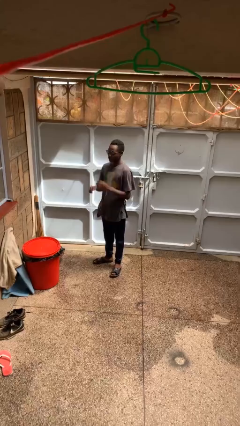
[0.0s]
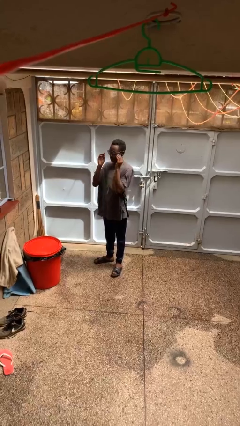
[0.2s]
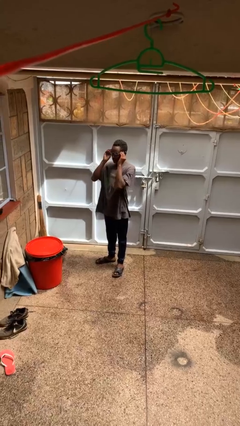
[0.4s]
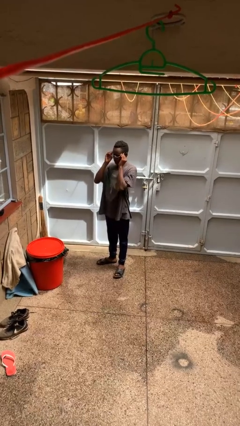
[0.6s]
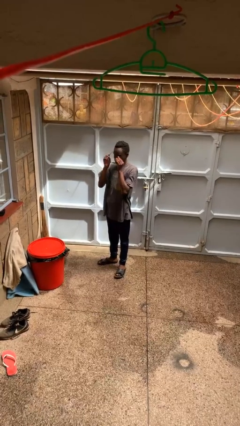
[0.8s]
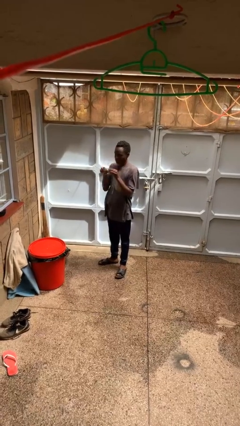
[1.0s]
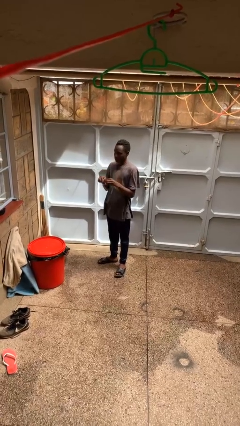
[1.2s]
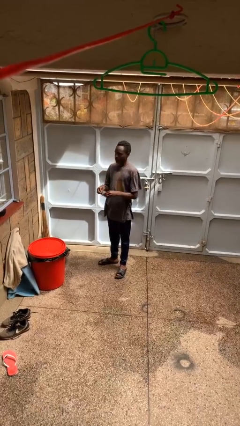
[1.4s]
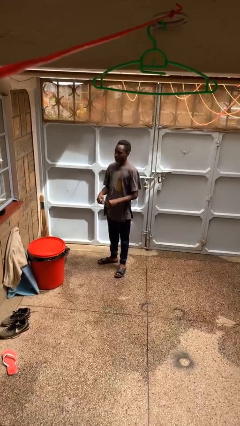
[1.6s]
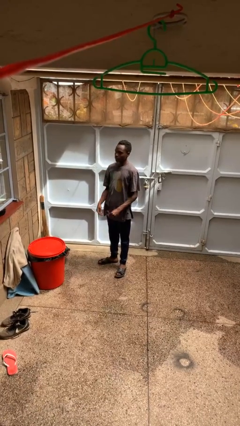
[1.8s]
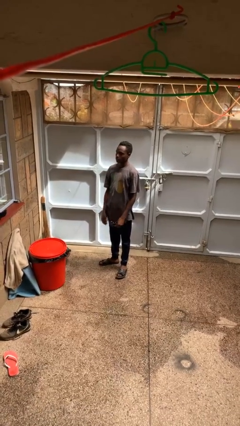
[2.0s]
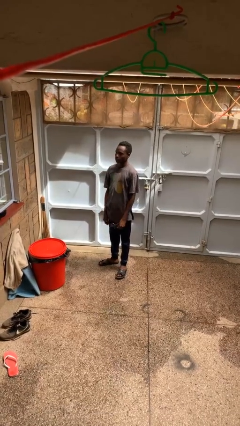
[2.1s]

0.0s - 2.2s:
person takes off glasses

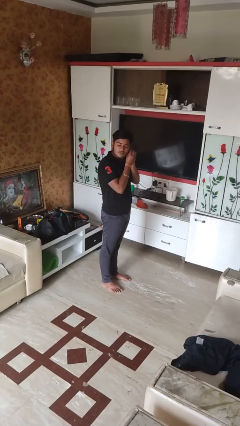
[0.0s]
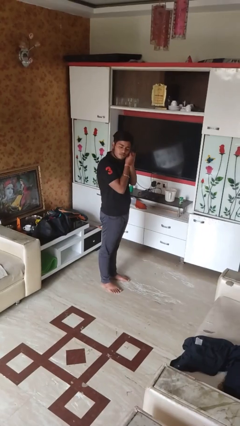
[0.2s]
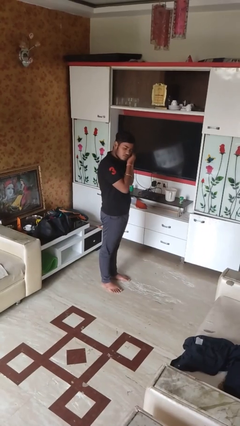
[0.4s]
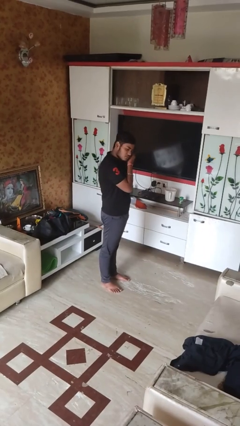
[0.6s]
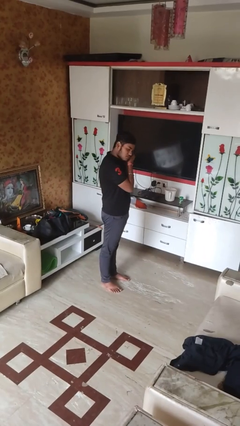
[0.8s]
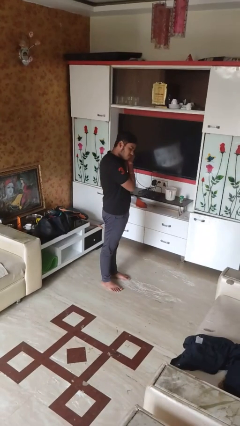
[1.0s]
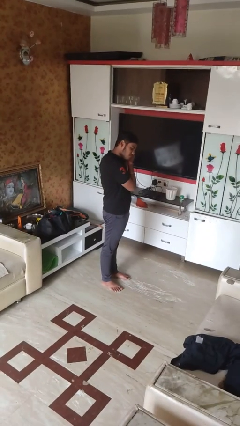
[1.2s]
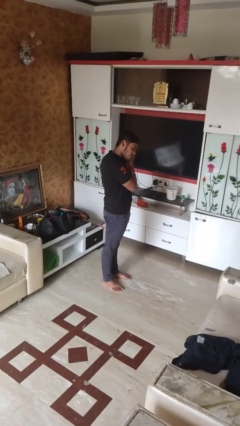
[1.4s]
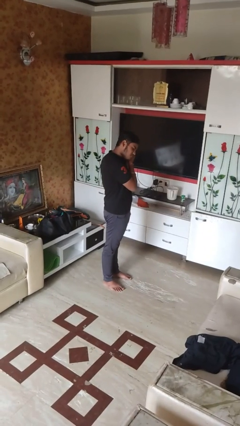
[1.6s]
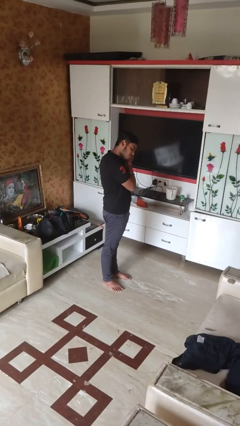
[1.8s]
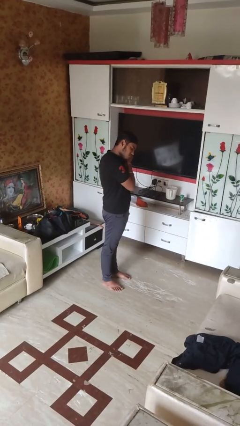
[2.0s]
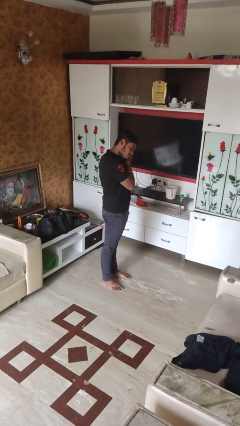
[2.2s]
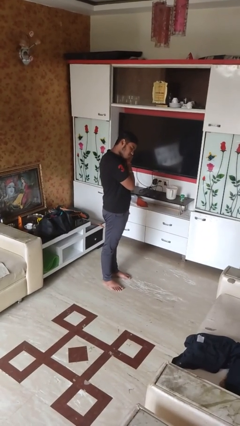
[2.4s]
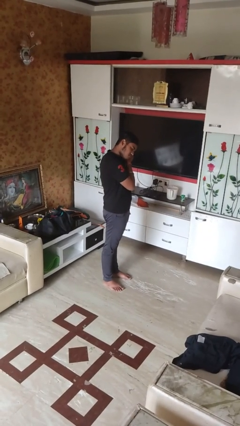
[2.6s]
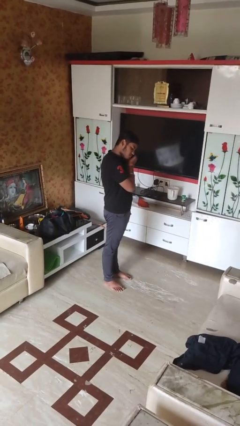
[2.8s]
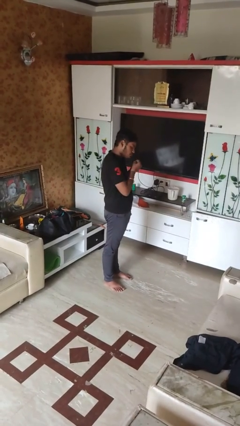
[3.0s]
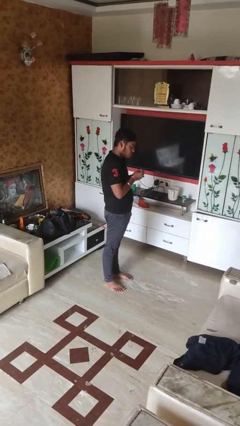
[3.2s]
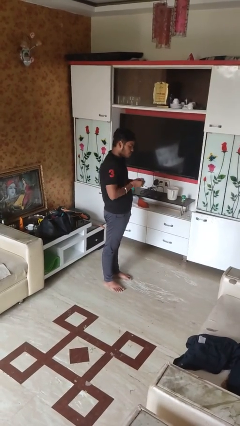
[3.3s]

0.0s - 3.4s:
person takes off earrings

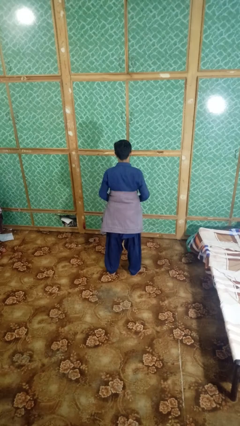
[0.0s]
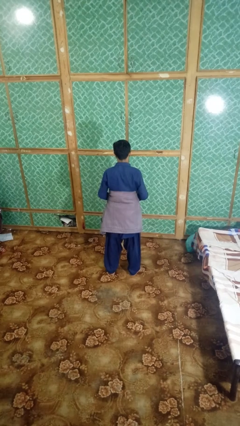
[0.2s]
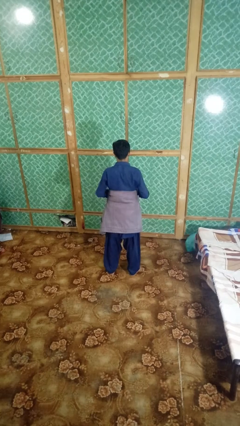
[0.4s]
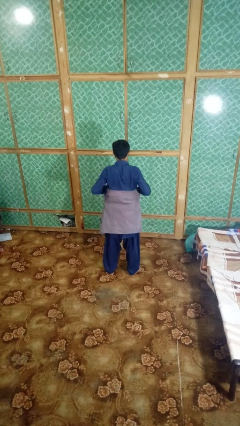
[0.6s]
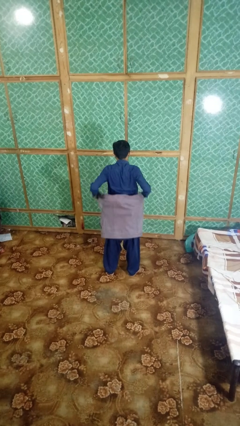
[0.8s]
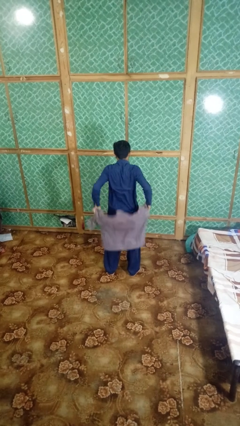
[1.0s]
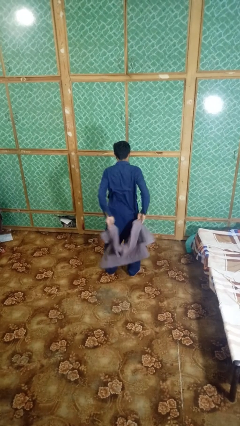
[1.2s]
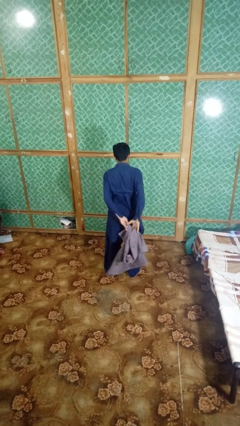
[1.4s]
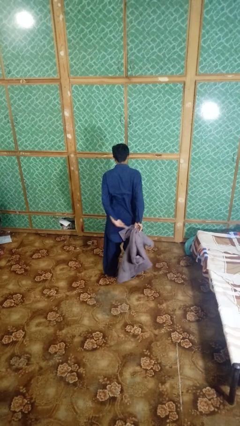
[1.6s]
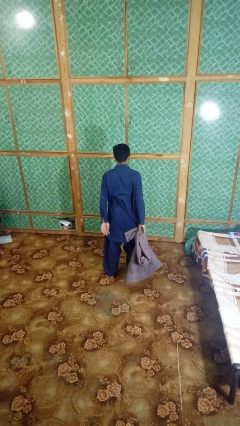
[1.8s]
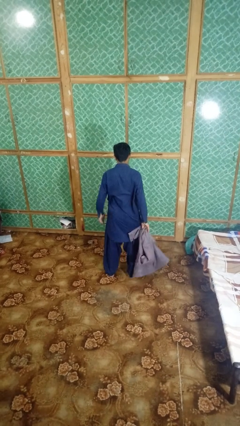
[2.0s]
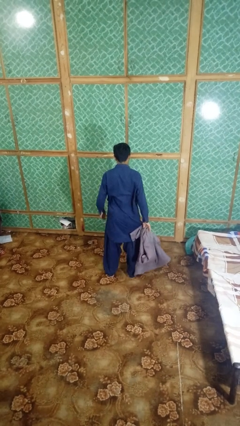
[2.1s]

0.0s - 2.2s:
person unties jacket around waist

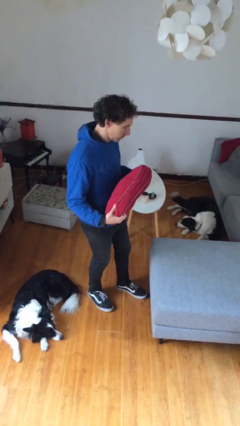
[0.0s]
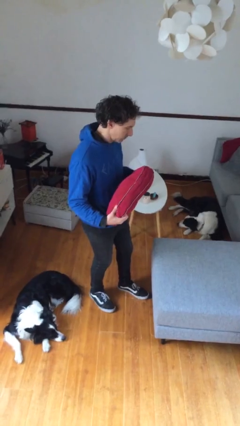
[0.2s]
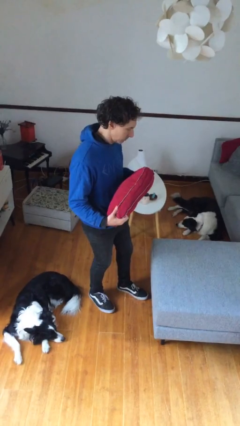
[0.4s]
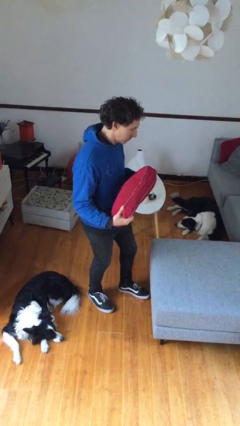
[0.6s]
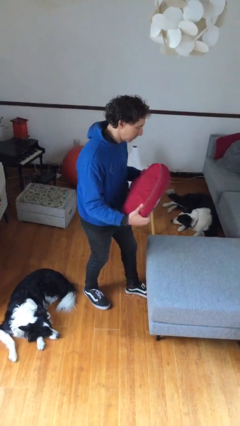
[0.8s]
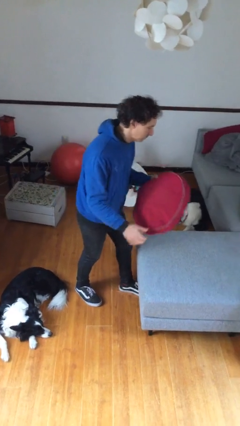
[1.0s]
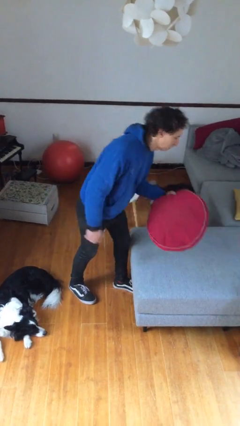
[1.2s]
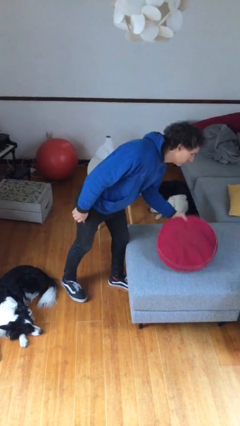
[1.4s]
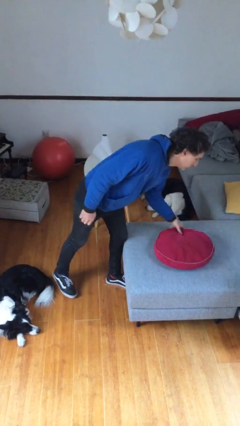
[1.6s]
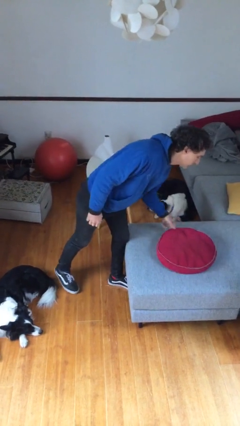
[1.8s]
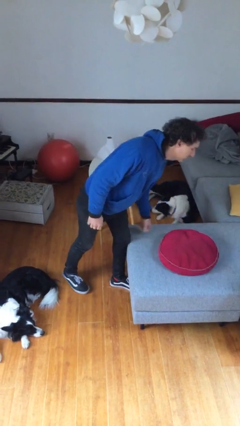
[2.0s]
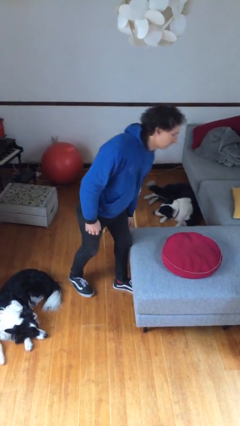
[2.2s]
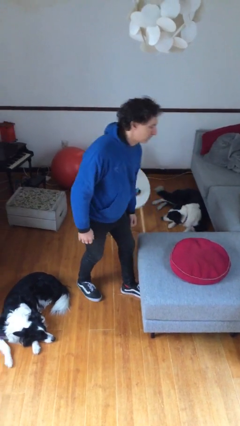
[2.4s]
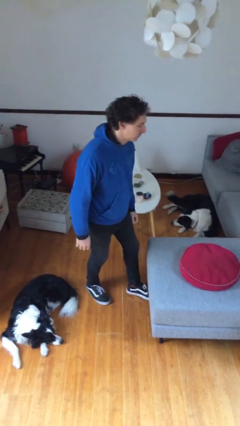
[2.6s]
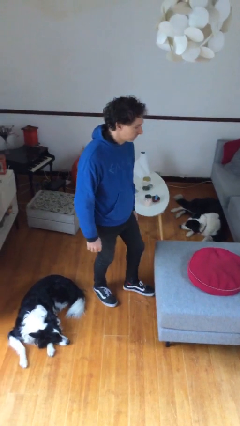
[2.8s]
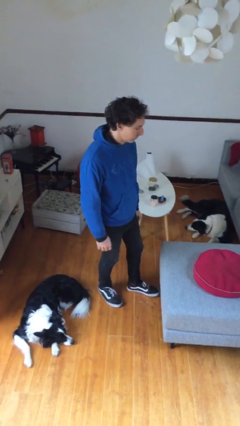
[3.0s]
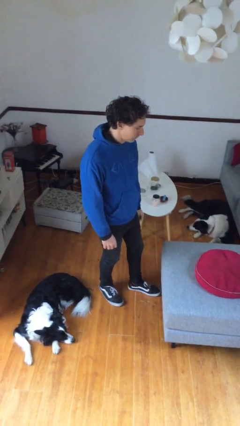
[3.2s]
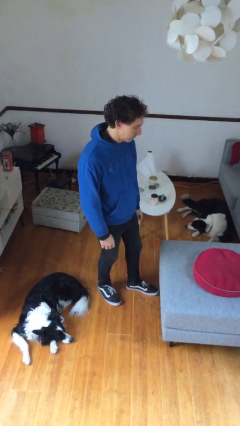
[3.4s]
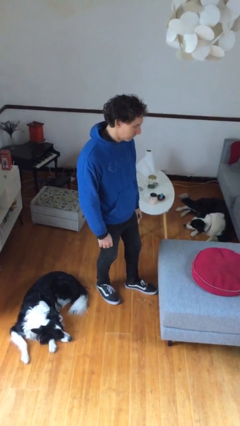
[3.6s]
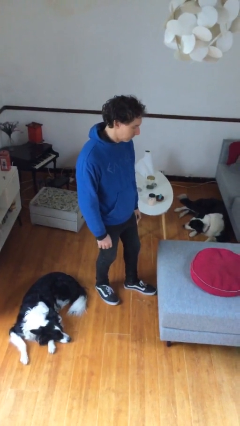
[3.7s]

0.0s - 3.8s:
person puts down object on couch

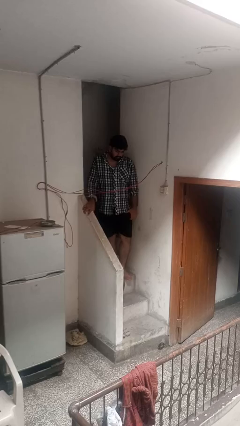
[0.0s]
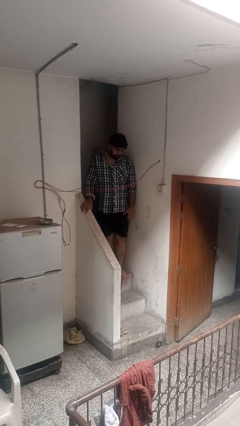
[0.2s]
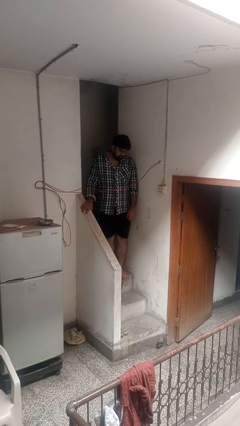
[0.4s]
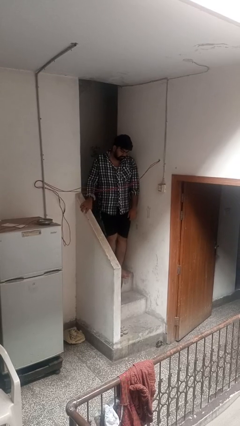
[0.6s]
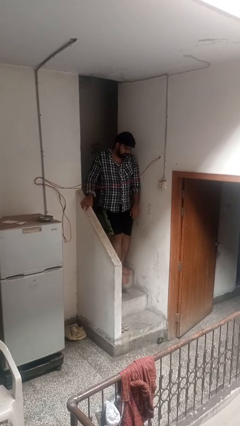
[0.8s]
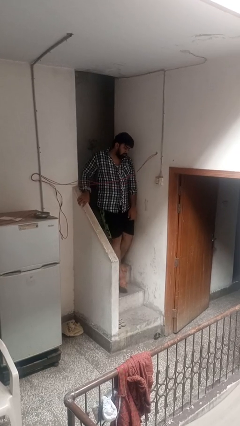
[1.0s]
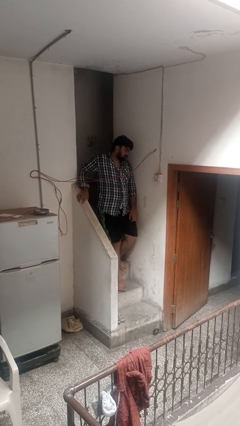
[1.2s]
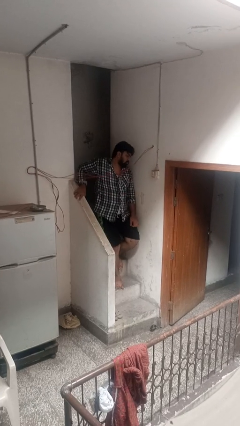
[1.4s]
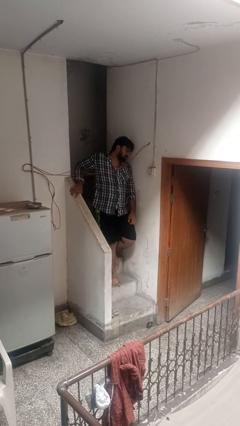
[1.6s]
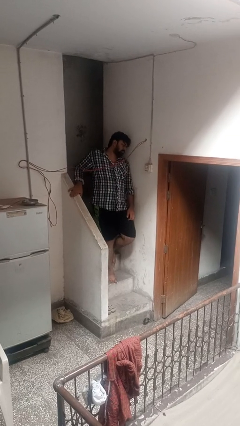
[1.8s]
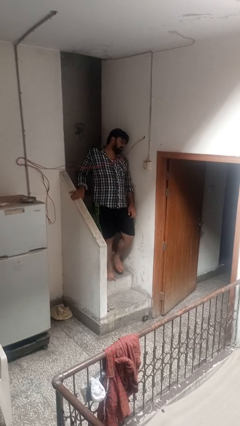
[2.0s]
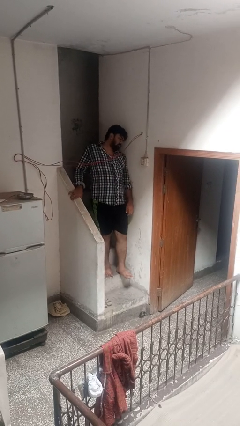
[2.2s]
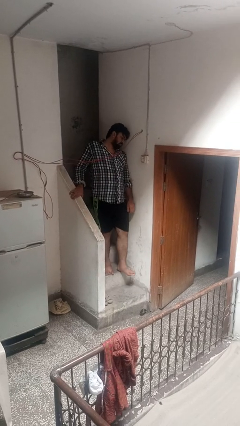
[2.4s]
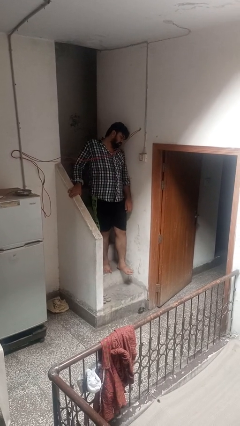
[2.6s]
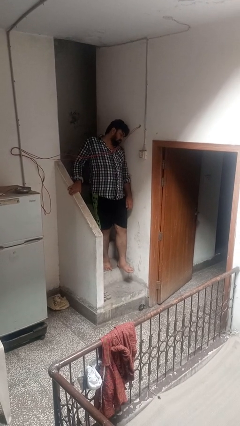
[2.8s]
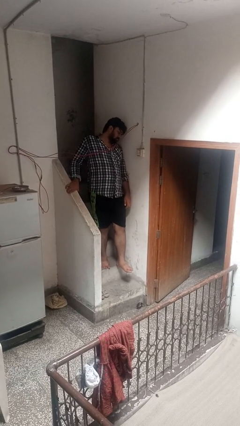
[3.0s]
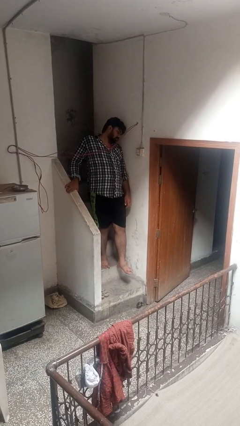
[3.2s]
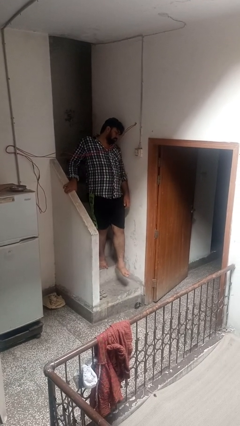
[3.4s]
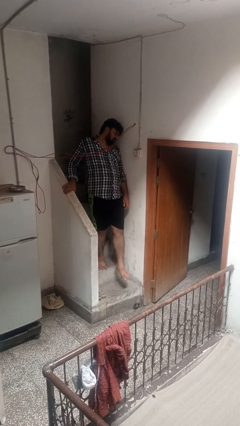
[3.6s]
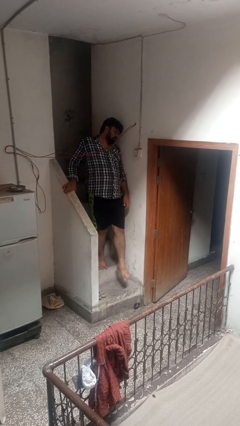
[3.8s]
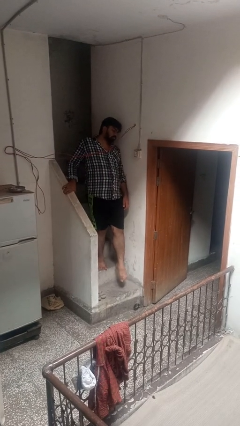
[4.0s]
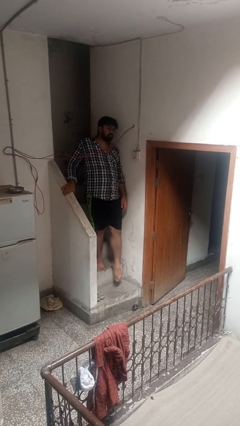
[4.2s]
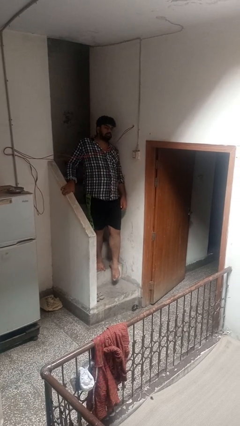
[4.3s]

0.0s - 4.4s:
person climbs down stairs

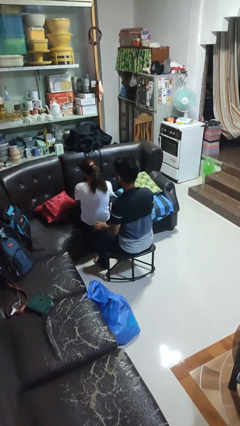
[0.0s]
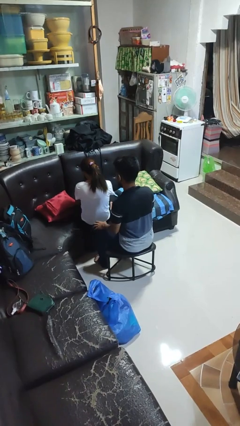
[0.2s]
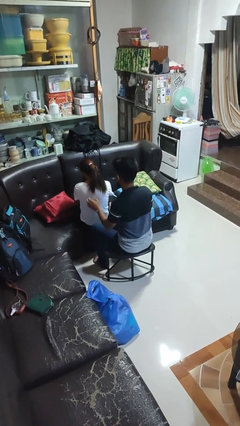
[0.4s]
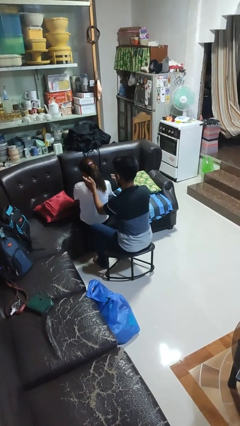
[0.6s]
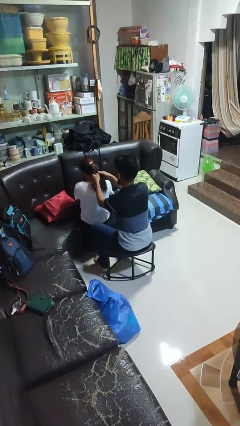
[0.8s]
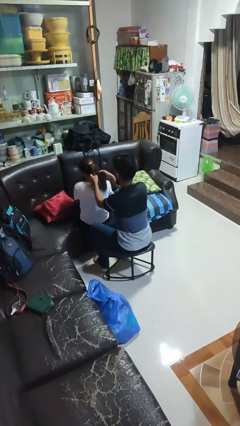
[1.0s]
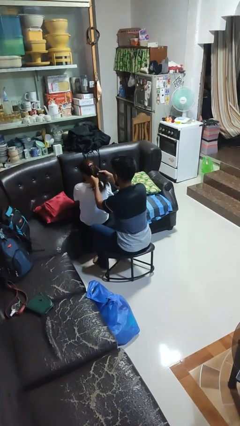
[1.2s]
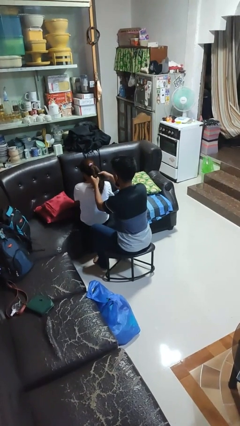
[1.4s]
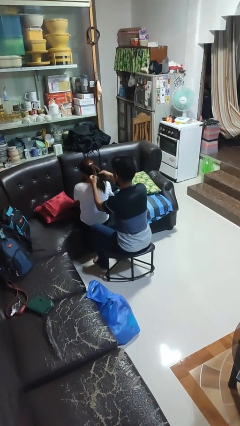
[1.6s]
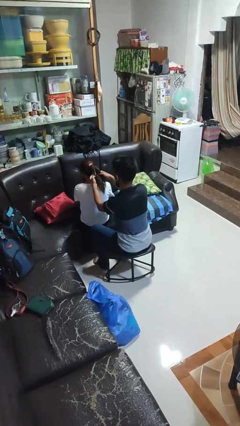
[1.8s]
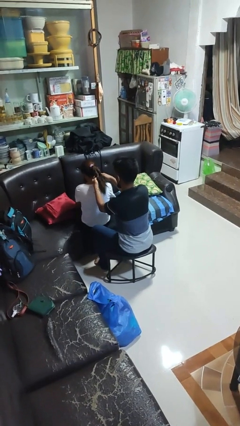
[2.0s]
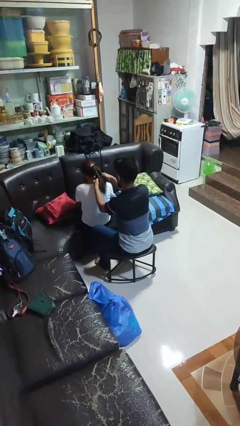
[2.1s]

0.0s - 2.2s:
person braids hair of person
